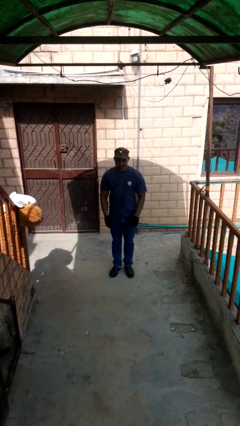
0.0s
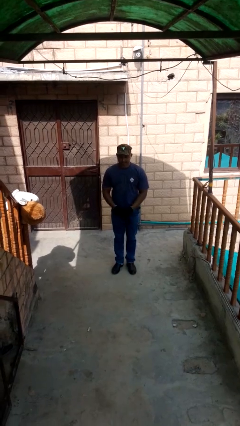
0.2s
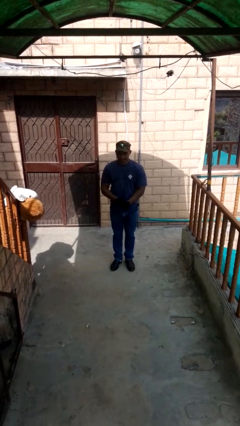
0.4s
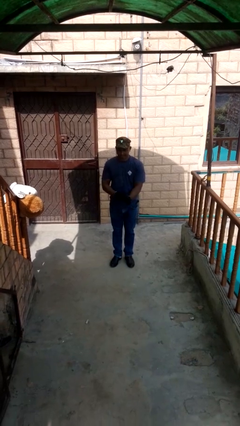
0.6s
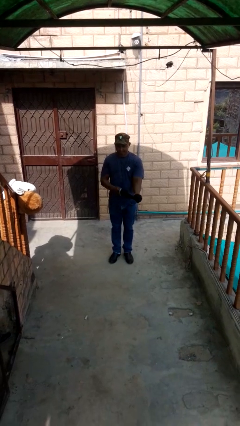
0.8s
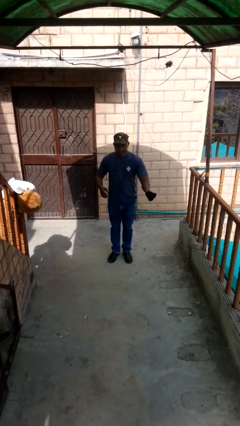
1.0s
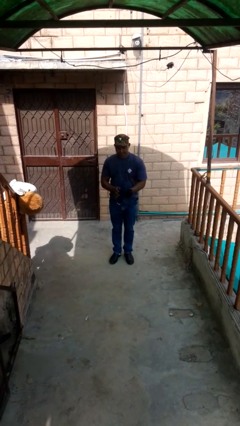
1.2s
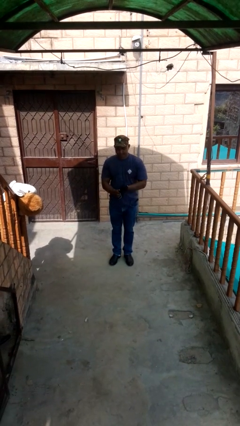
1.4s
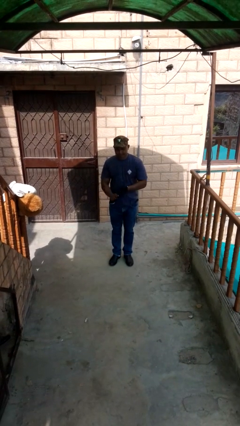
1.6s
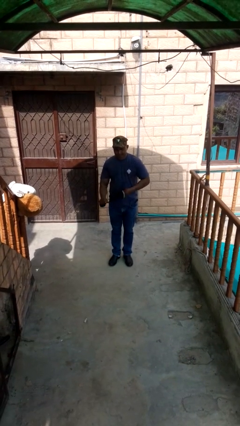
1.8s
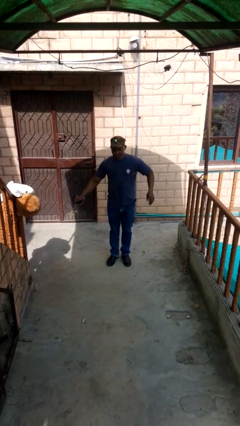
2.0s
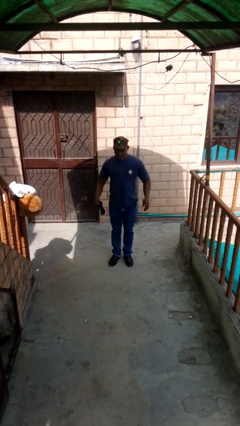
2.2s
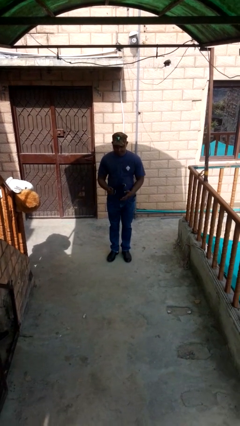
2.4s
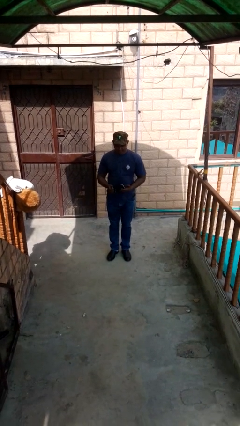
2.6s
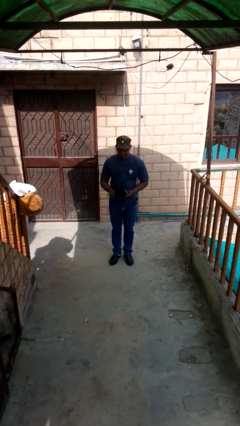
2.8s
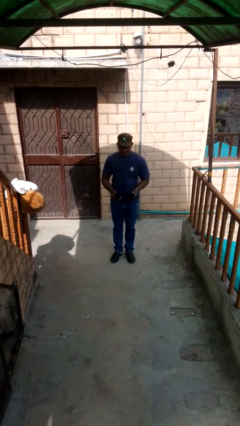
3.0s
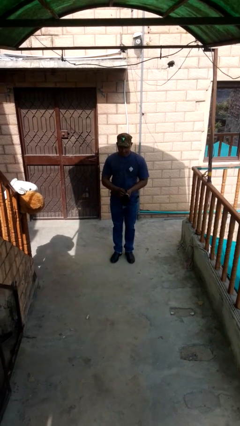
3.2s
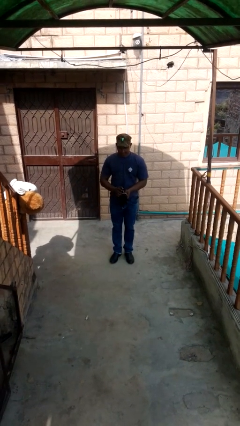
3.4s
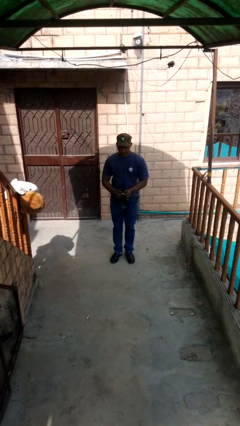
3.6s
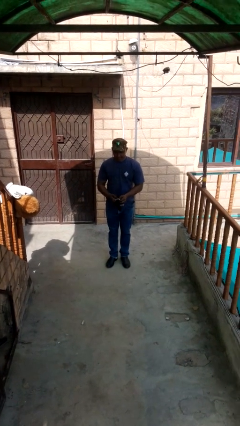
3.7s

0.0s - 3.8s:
person takes off gloves

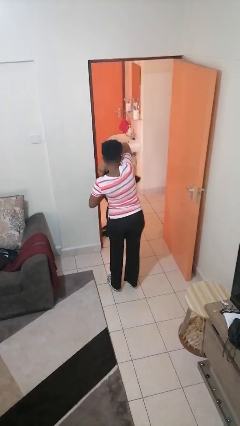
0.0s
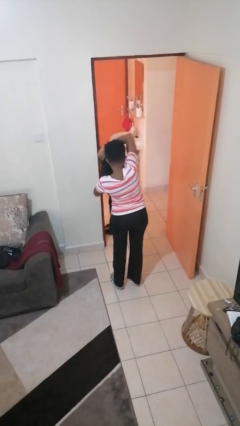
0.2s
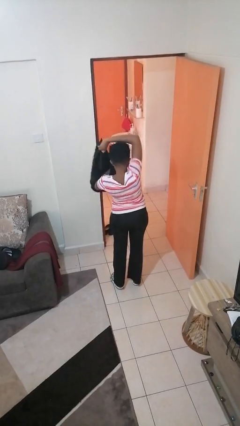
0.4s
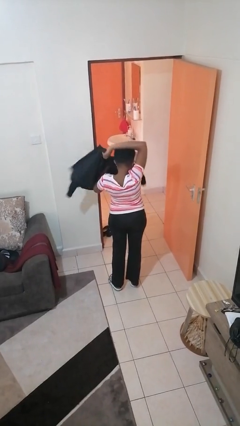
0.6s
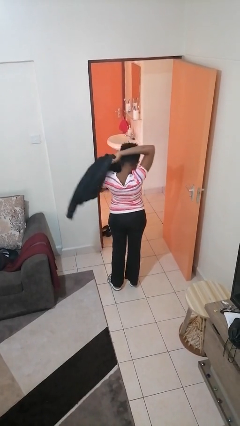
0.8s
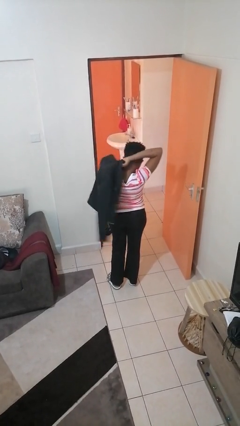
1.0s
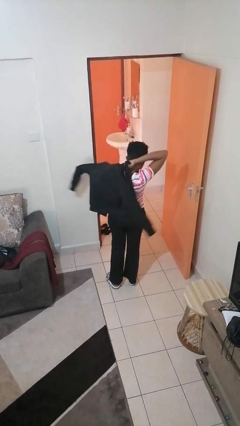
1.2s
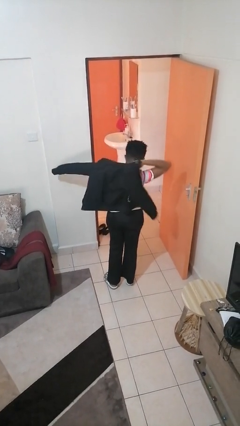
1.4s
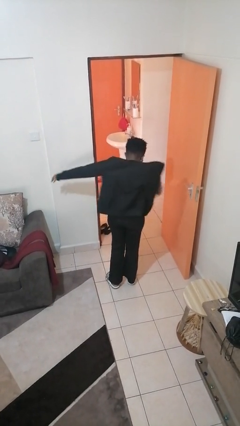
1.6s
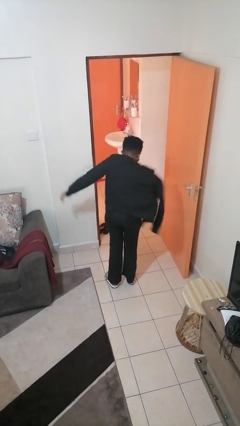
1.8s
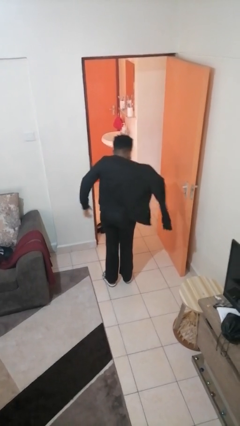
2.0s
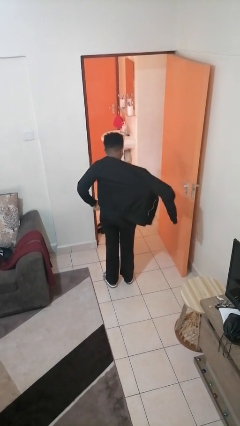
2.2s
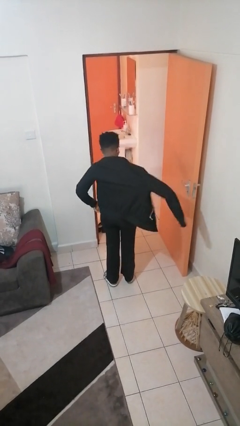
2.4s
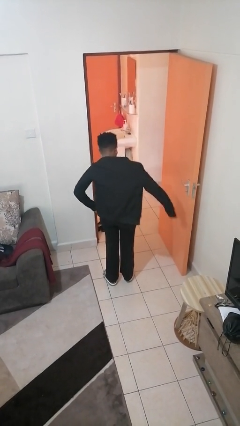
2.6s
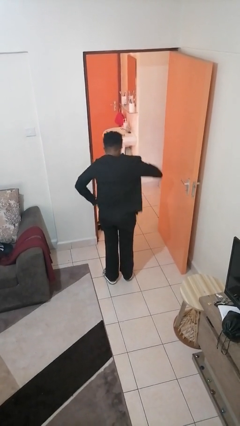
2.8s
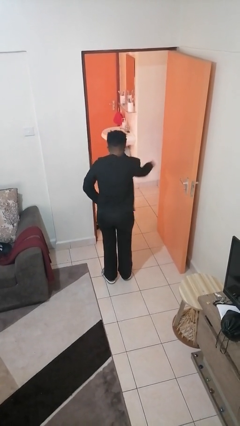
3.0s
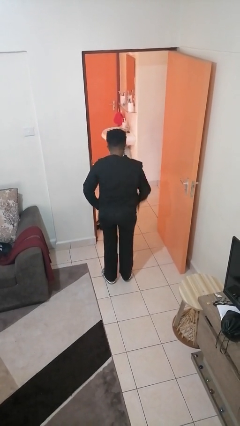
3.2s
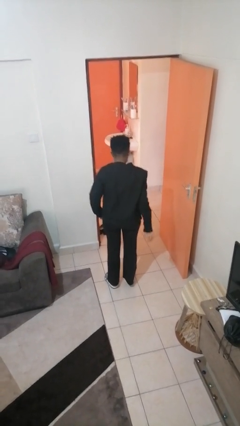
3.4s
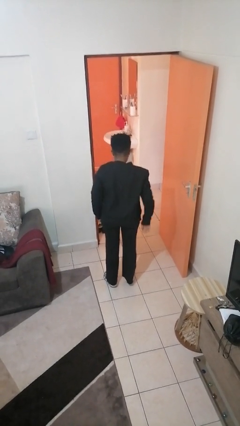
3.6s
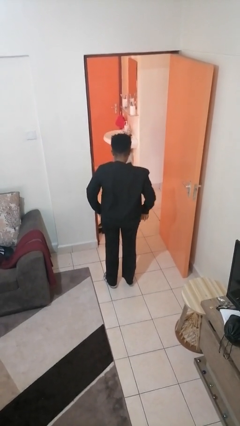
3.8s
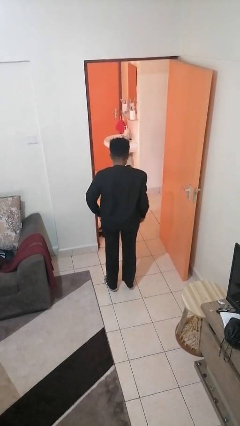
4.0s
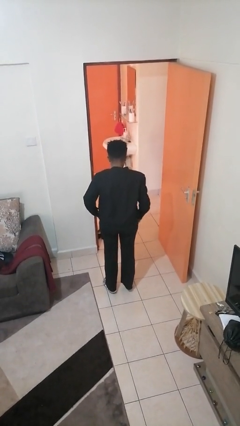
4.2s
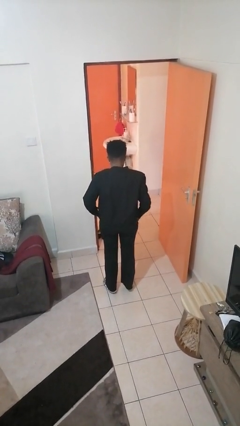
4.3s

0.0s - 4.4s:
person puts on jacket

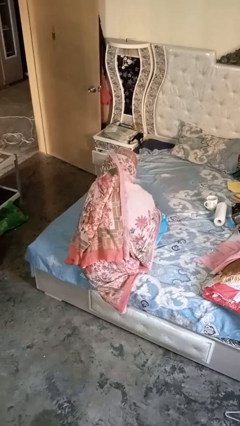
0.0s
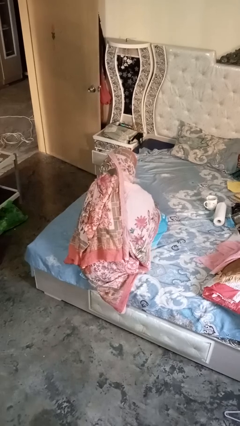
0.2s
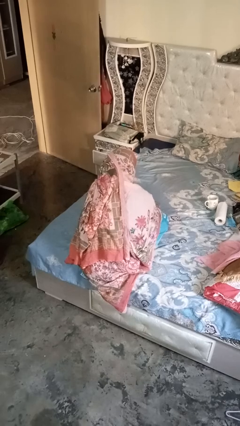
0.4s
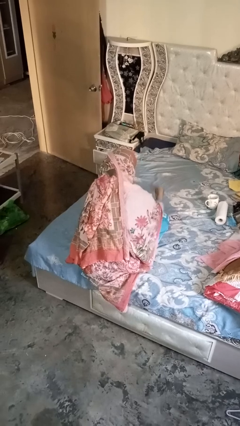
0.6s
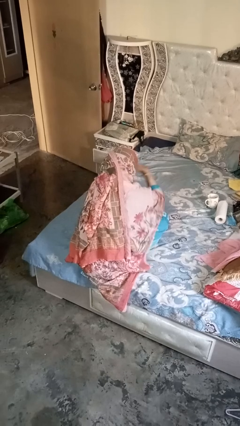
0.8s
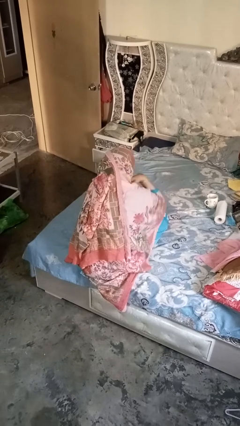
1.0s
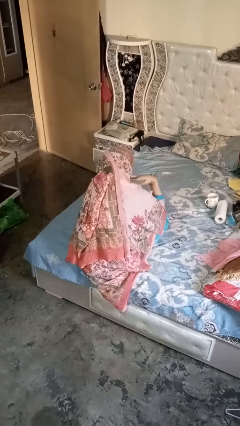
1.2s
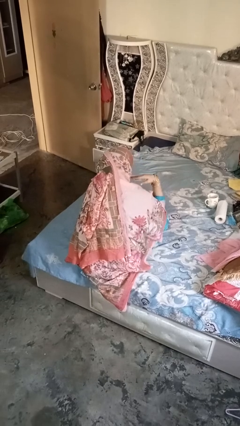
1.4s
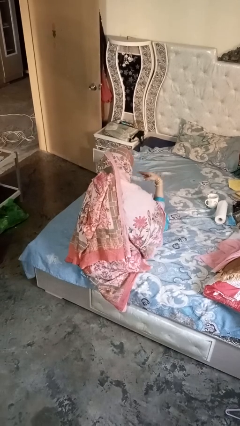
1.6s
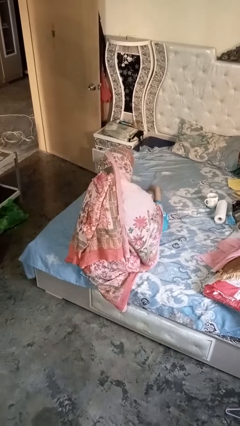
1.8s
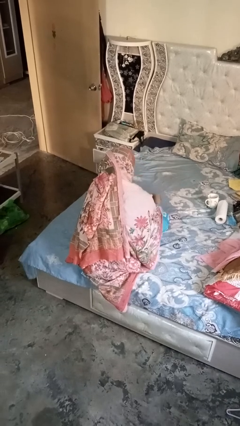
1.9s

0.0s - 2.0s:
person gestures cut

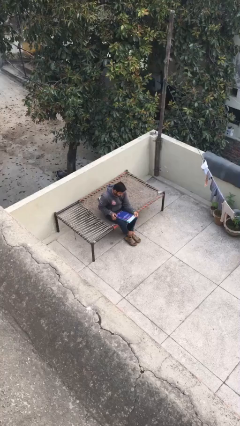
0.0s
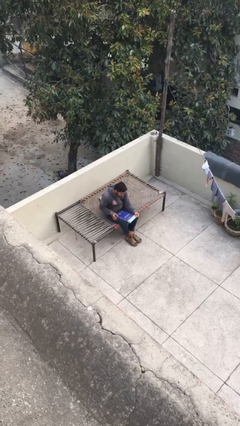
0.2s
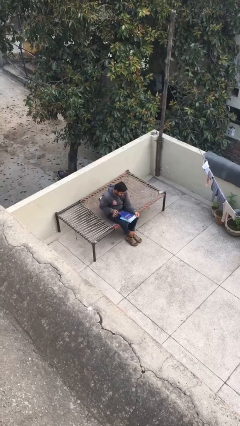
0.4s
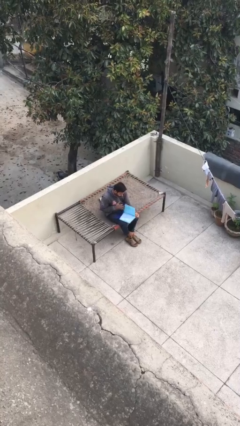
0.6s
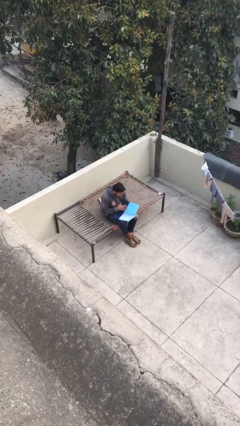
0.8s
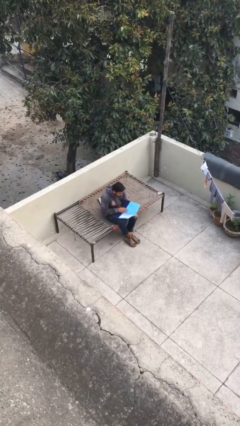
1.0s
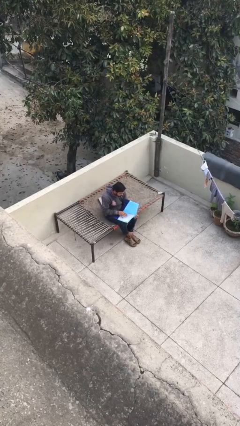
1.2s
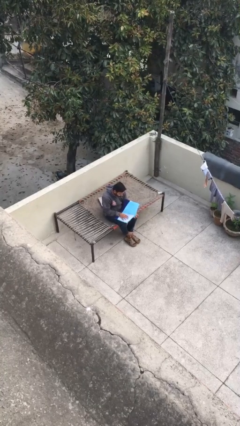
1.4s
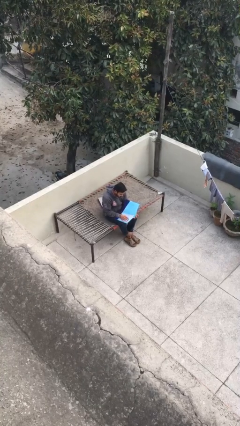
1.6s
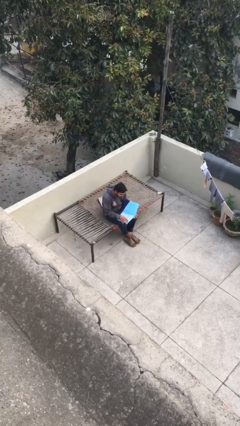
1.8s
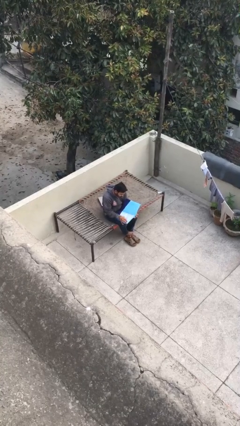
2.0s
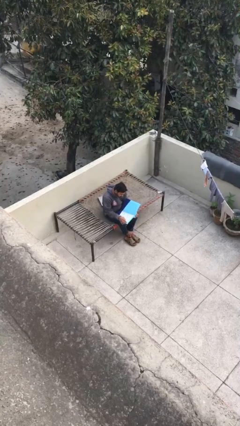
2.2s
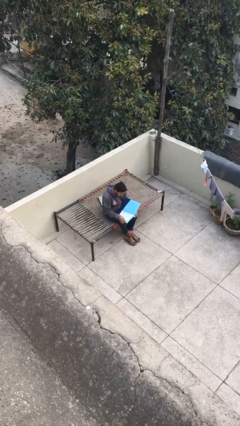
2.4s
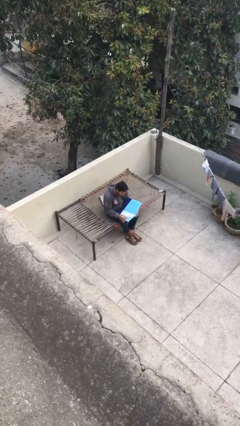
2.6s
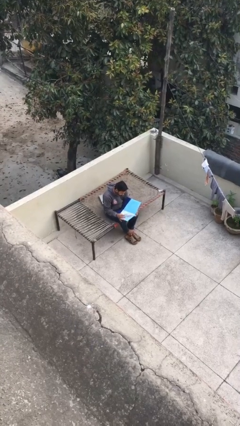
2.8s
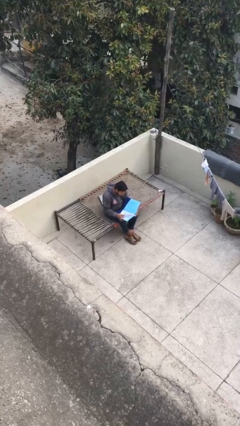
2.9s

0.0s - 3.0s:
person reads document

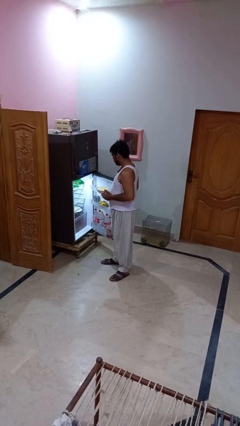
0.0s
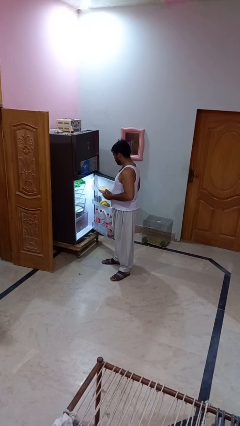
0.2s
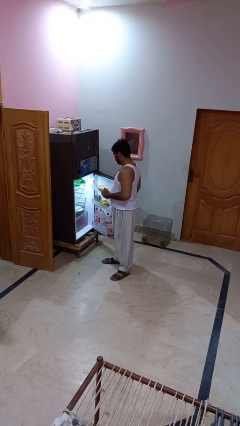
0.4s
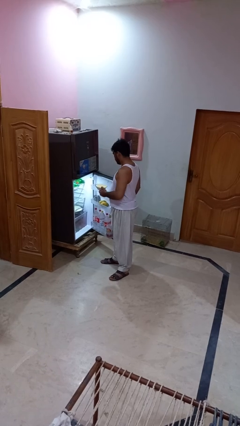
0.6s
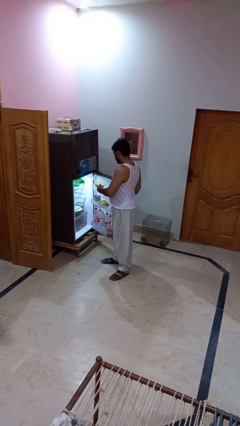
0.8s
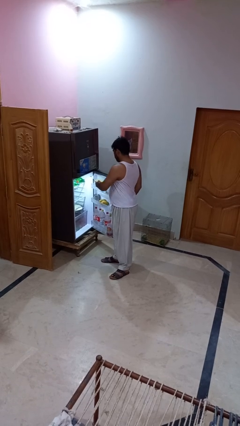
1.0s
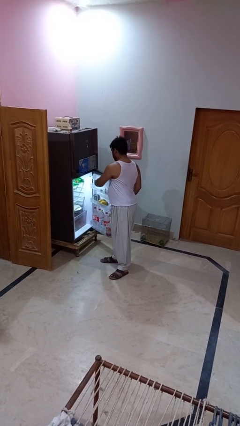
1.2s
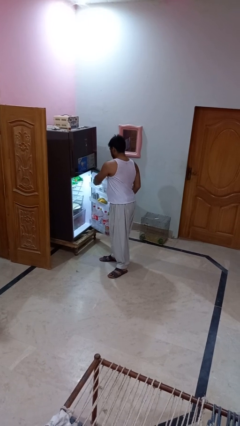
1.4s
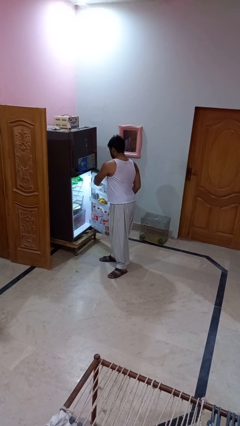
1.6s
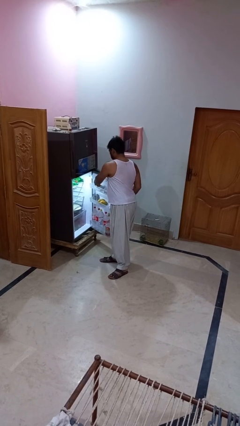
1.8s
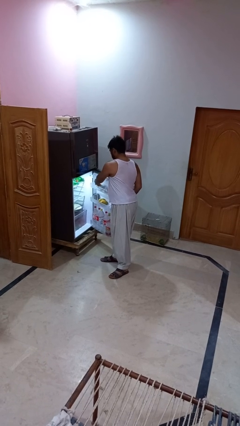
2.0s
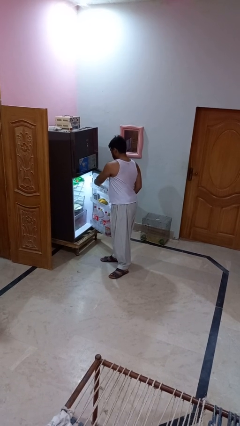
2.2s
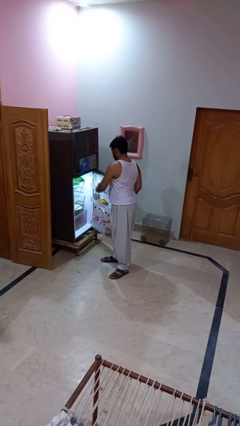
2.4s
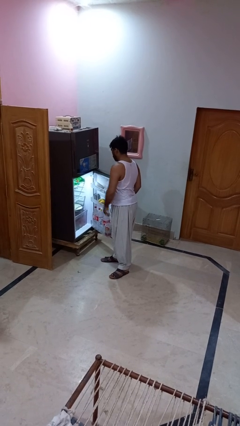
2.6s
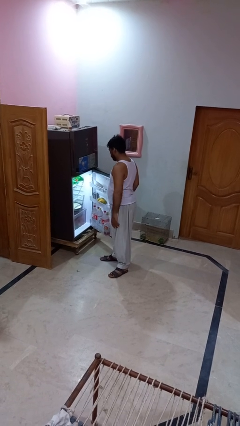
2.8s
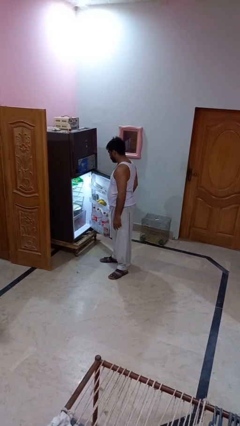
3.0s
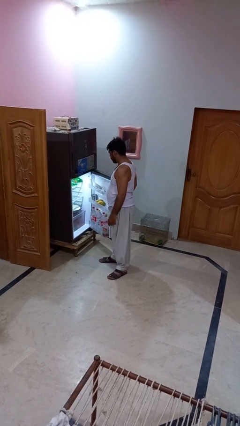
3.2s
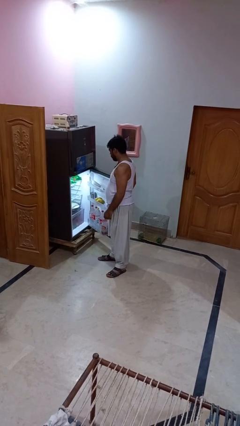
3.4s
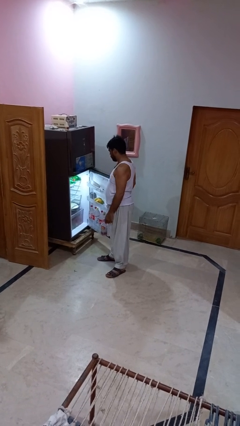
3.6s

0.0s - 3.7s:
person puts object into refrigerator

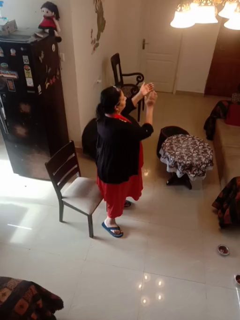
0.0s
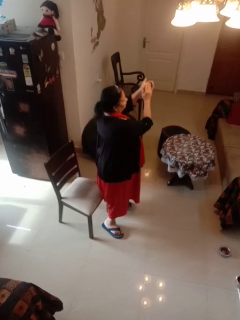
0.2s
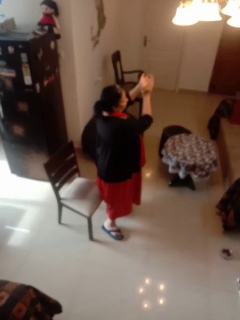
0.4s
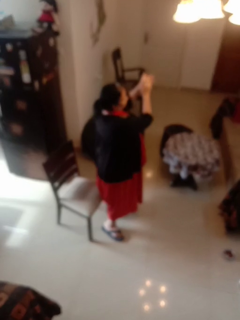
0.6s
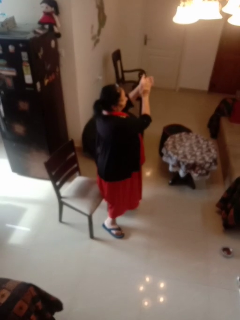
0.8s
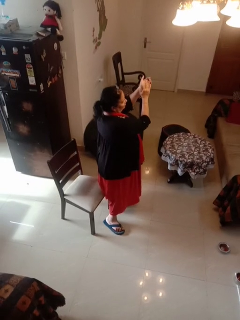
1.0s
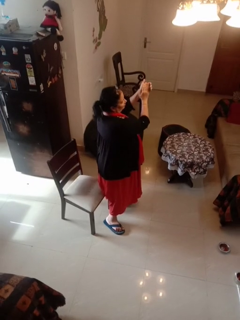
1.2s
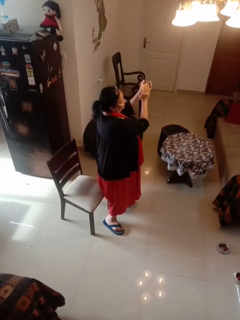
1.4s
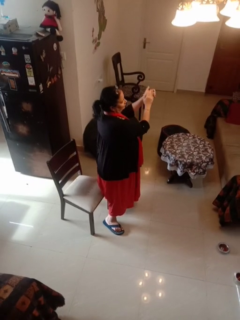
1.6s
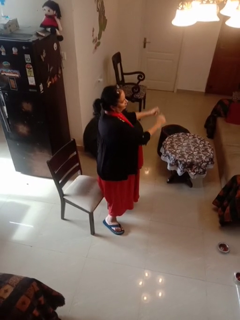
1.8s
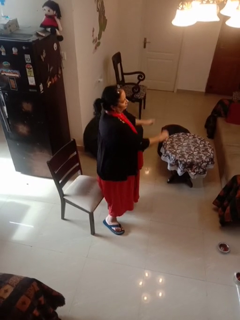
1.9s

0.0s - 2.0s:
person claps hands
